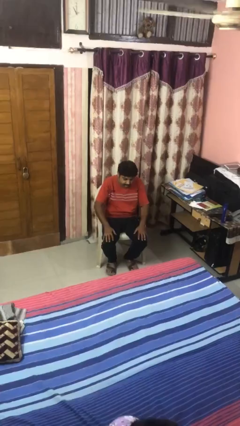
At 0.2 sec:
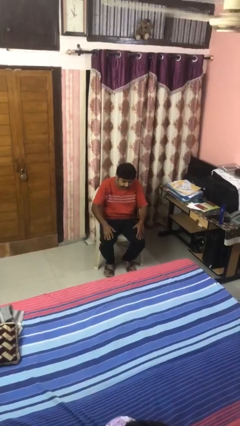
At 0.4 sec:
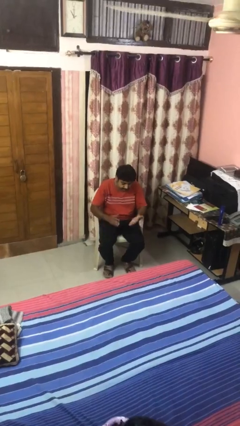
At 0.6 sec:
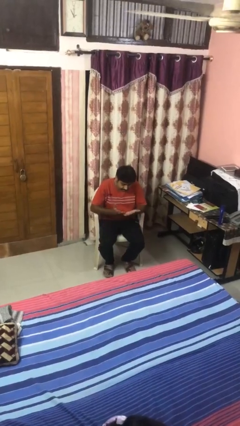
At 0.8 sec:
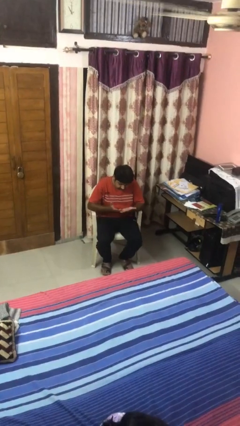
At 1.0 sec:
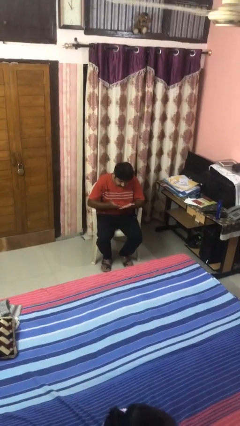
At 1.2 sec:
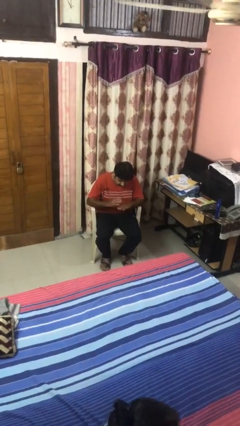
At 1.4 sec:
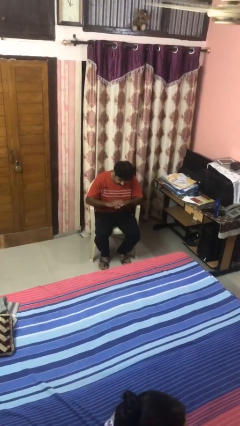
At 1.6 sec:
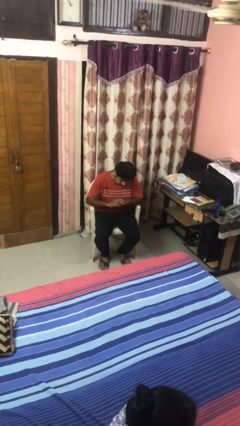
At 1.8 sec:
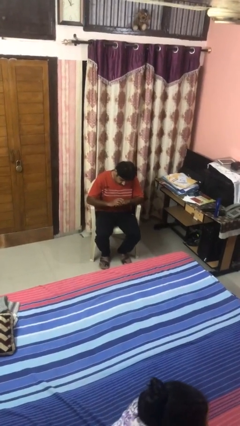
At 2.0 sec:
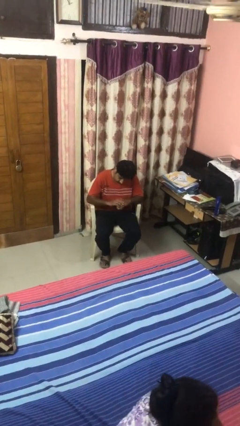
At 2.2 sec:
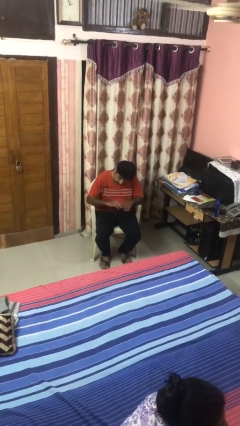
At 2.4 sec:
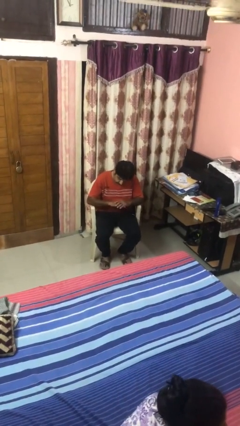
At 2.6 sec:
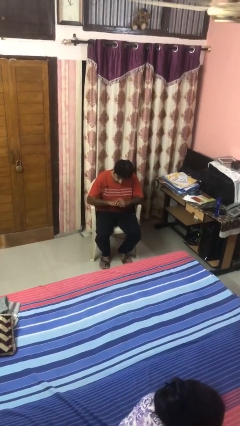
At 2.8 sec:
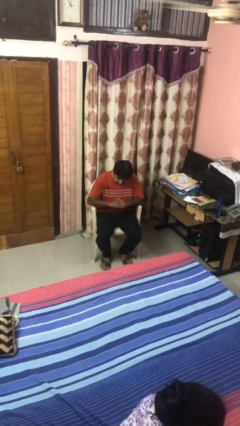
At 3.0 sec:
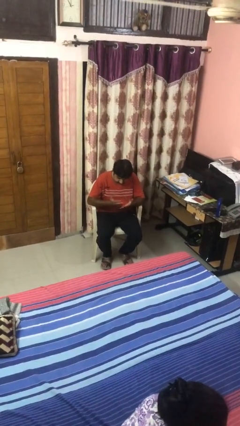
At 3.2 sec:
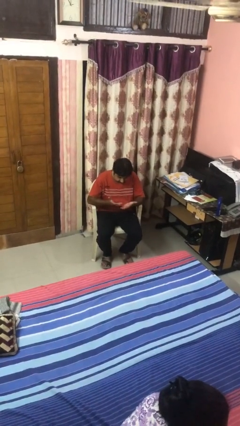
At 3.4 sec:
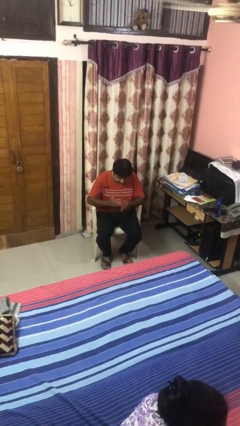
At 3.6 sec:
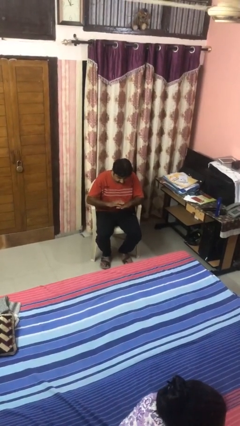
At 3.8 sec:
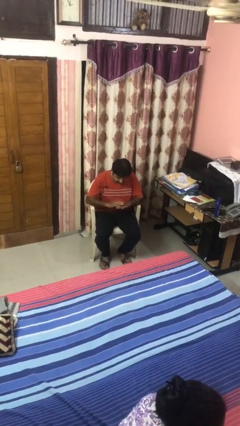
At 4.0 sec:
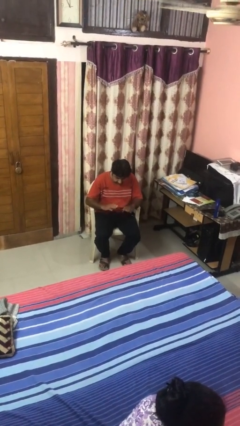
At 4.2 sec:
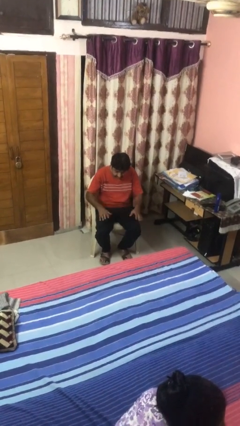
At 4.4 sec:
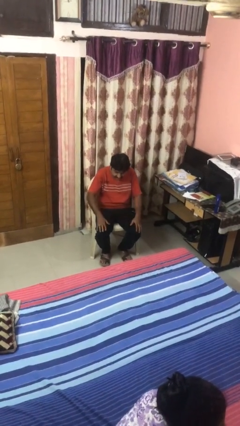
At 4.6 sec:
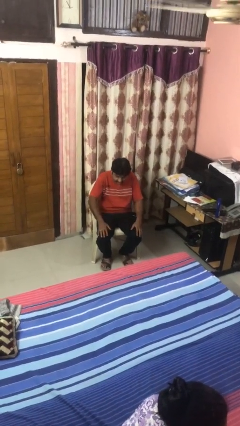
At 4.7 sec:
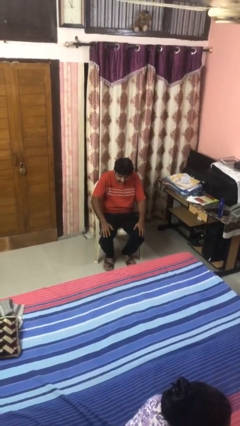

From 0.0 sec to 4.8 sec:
person looks at hands in lap

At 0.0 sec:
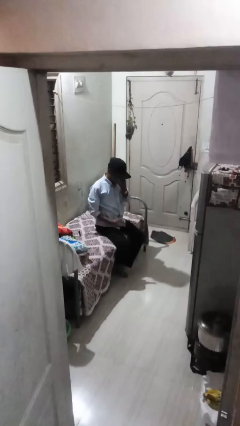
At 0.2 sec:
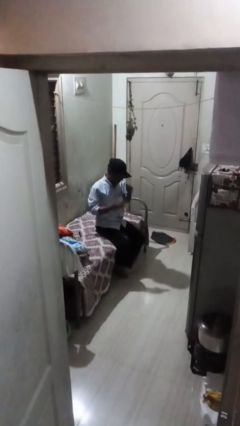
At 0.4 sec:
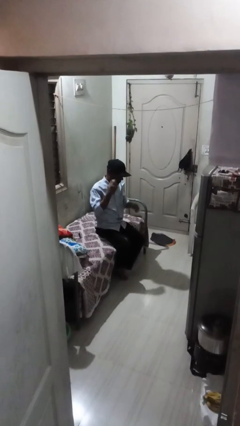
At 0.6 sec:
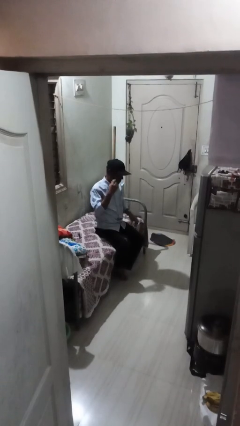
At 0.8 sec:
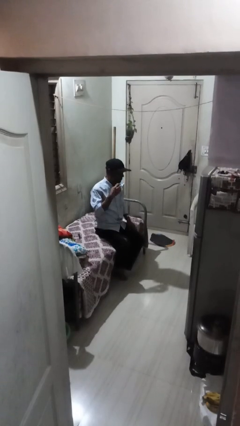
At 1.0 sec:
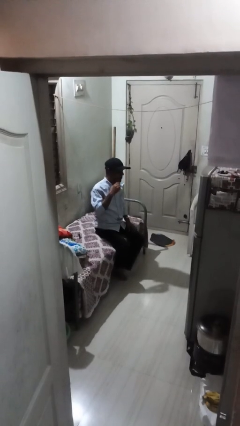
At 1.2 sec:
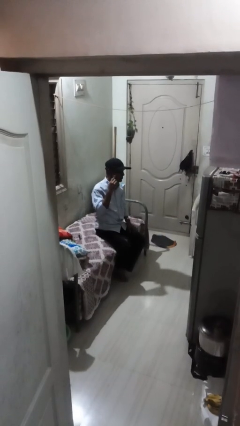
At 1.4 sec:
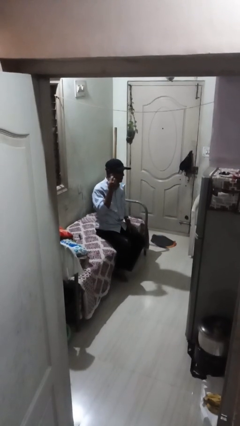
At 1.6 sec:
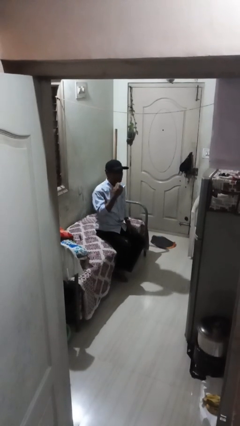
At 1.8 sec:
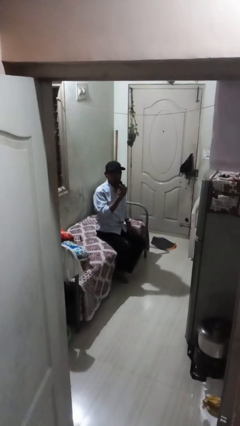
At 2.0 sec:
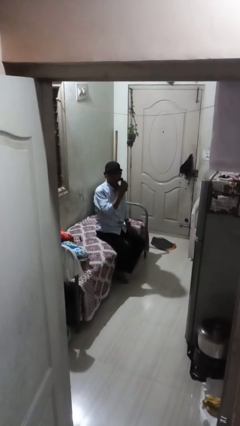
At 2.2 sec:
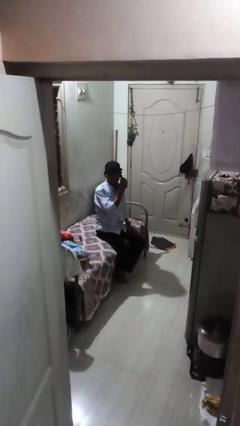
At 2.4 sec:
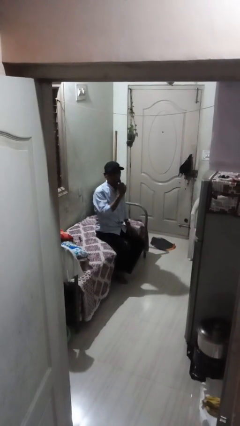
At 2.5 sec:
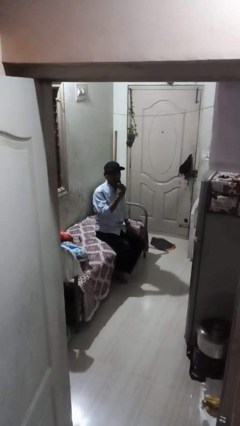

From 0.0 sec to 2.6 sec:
person applies shaving cream

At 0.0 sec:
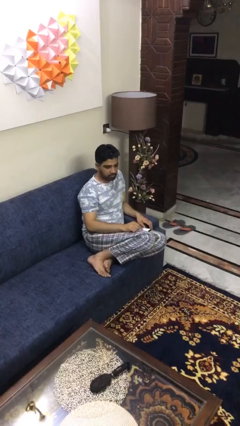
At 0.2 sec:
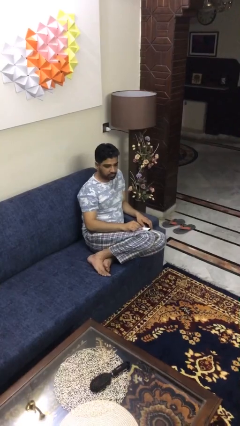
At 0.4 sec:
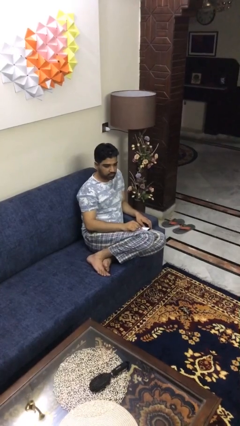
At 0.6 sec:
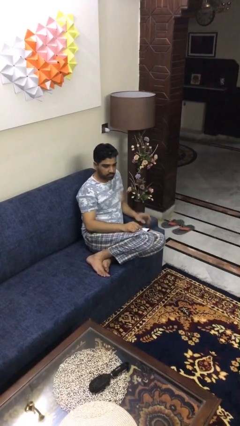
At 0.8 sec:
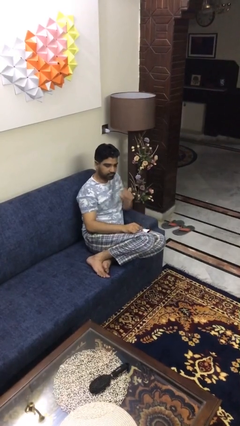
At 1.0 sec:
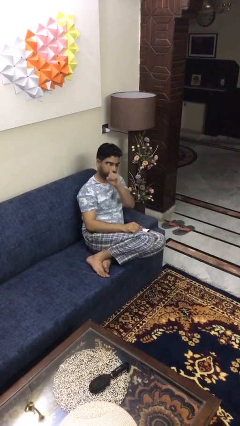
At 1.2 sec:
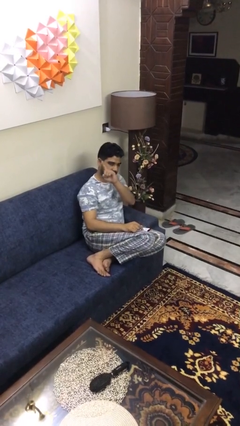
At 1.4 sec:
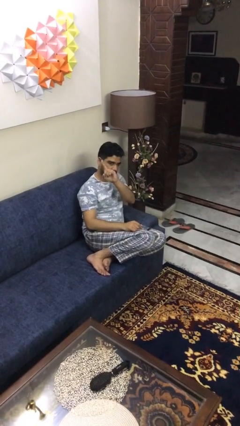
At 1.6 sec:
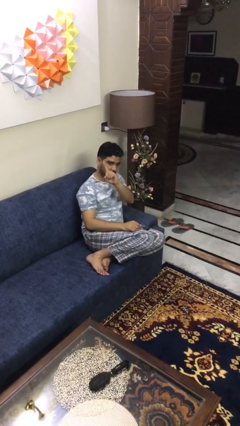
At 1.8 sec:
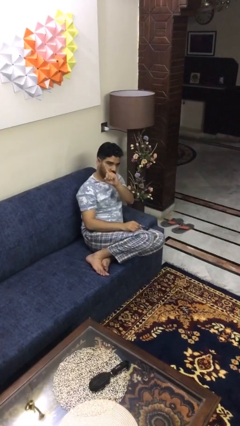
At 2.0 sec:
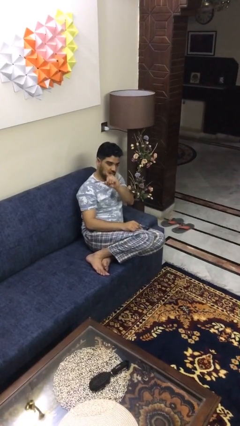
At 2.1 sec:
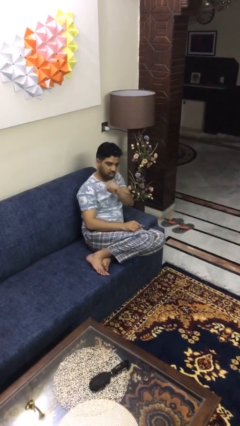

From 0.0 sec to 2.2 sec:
person gestures number one

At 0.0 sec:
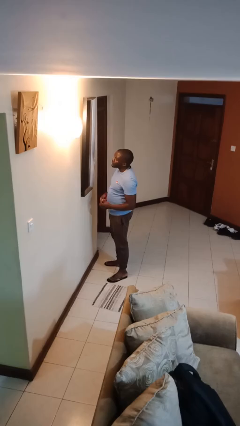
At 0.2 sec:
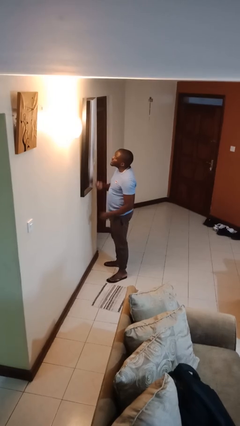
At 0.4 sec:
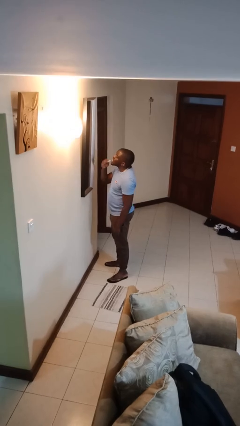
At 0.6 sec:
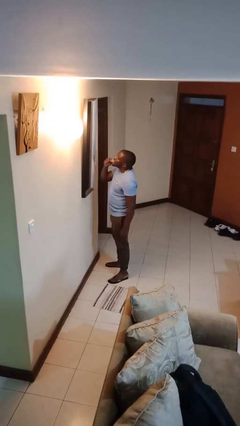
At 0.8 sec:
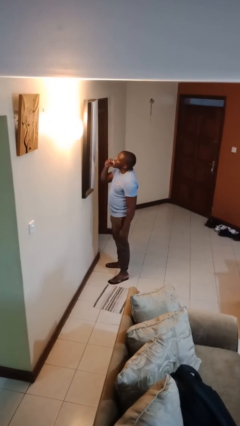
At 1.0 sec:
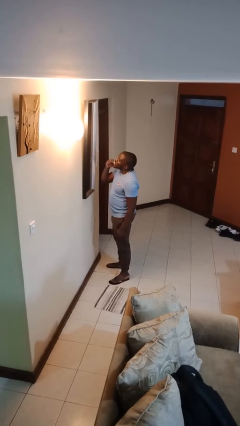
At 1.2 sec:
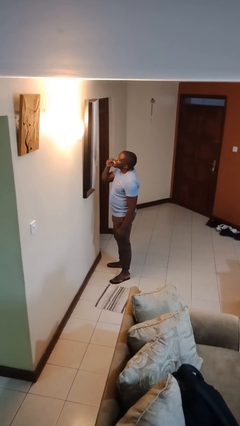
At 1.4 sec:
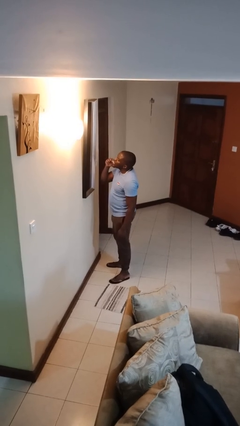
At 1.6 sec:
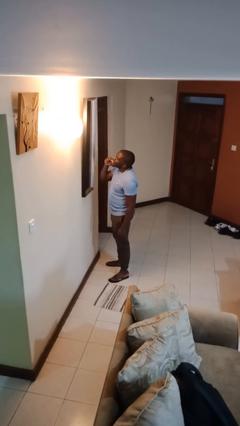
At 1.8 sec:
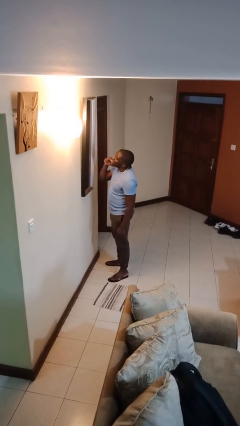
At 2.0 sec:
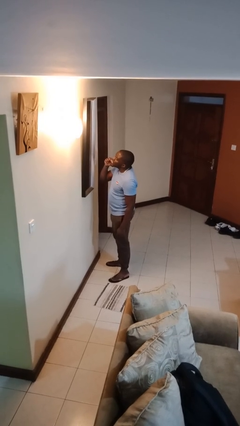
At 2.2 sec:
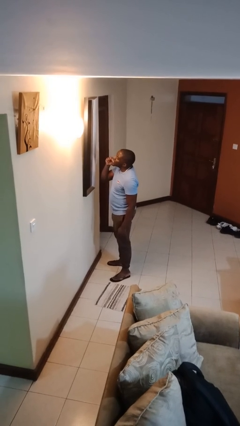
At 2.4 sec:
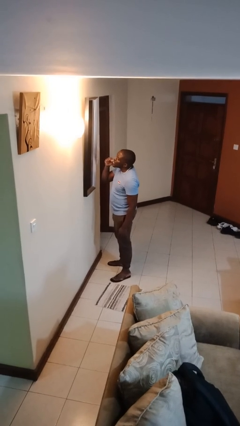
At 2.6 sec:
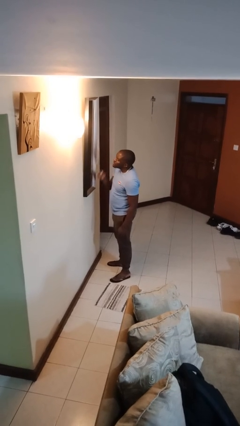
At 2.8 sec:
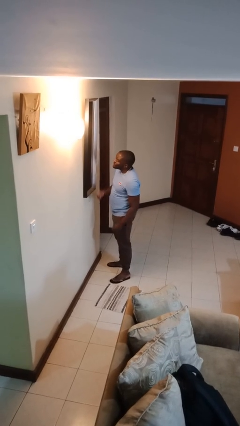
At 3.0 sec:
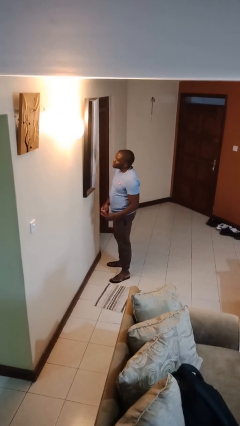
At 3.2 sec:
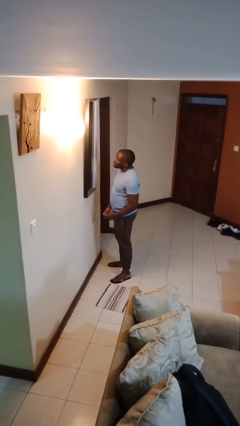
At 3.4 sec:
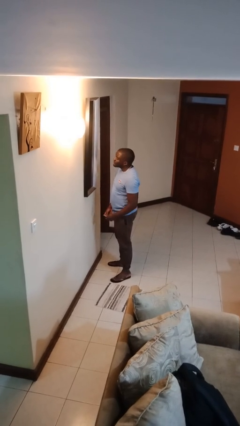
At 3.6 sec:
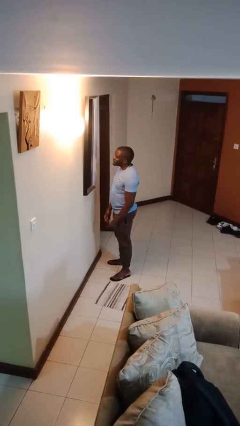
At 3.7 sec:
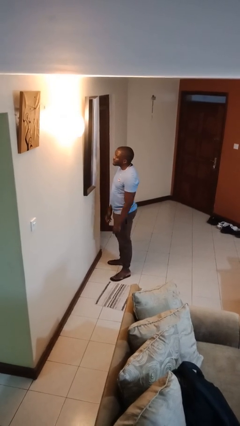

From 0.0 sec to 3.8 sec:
person flosses

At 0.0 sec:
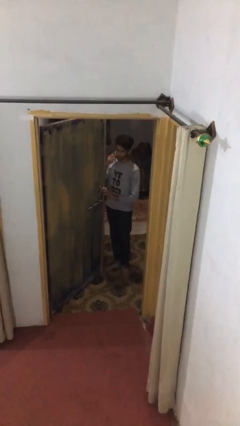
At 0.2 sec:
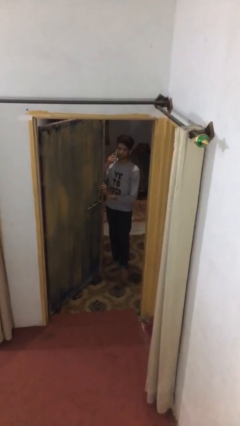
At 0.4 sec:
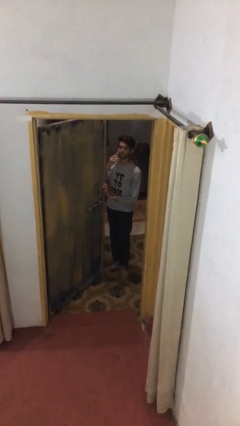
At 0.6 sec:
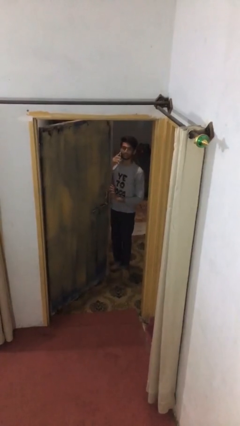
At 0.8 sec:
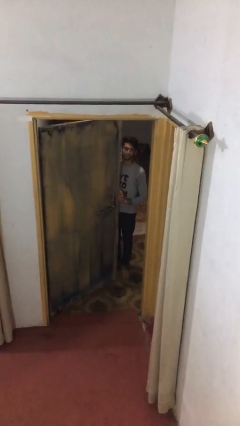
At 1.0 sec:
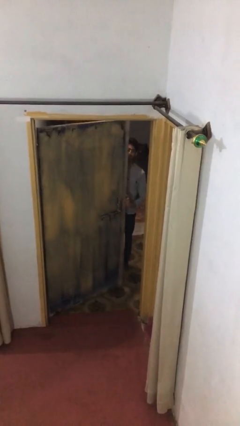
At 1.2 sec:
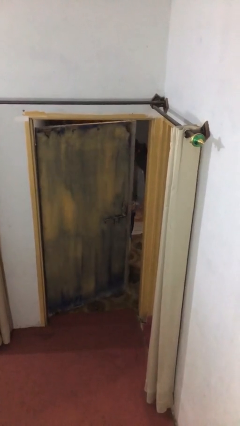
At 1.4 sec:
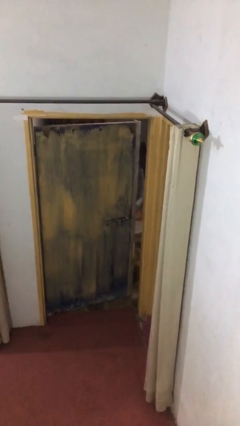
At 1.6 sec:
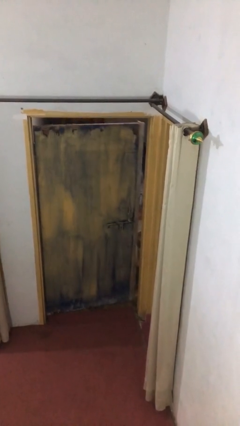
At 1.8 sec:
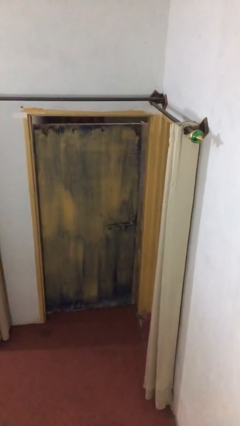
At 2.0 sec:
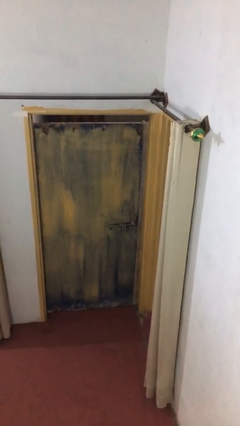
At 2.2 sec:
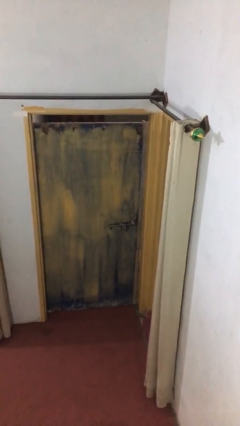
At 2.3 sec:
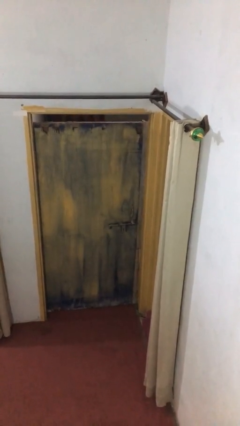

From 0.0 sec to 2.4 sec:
person closes facility door

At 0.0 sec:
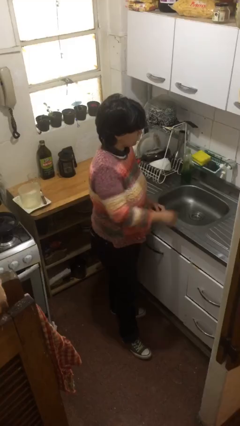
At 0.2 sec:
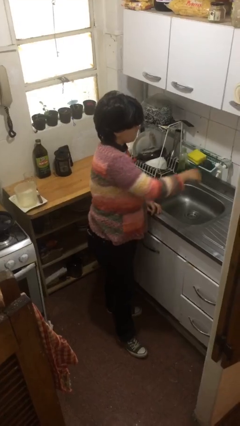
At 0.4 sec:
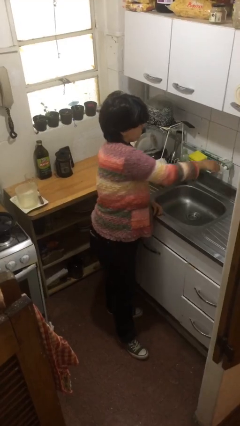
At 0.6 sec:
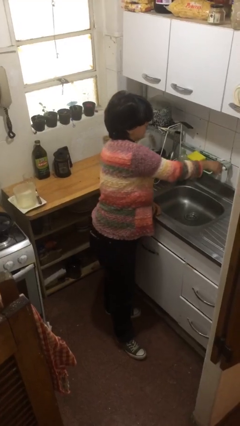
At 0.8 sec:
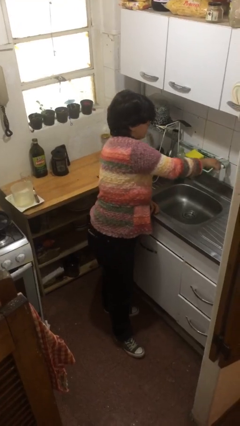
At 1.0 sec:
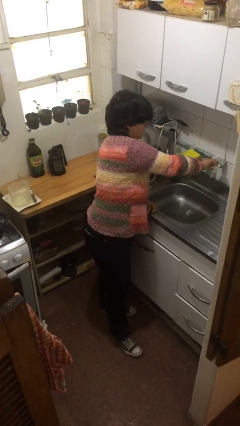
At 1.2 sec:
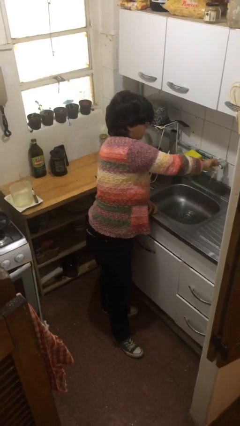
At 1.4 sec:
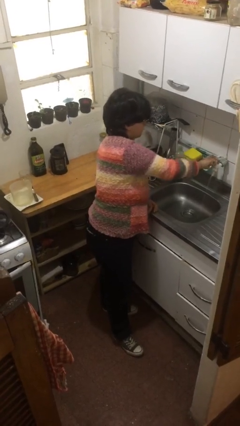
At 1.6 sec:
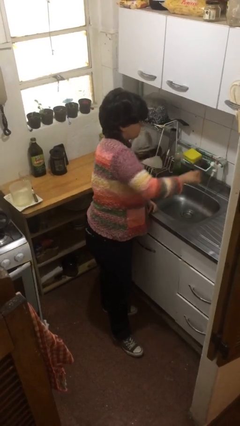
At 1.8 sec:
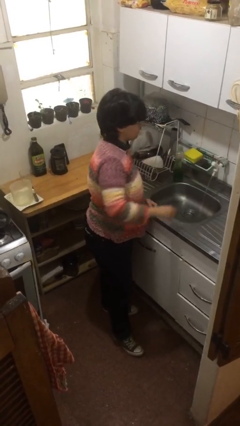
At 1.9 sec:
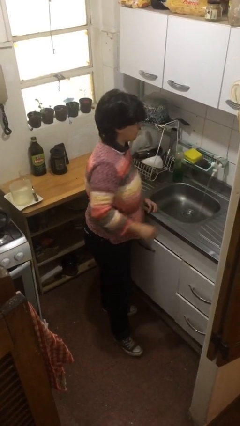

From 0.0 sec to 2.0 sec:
person turns on faucet
